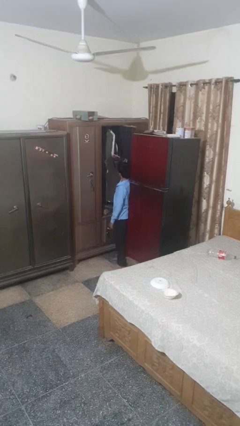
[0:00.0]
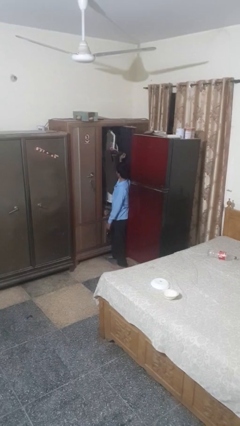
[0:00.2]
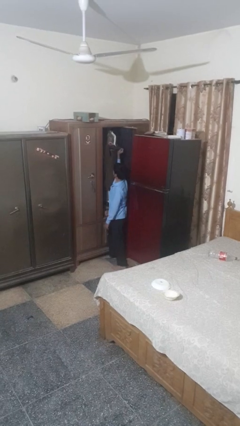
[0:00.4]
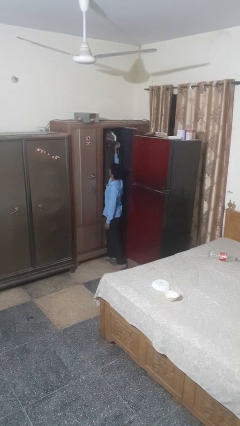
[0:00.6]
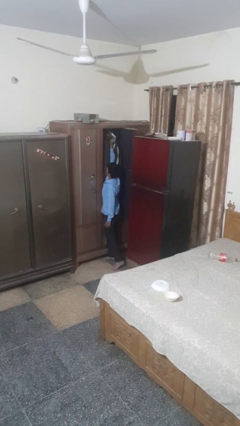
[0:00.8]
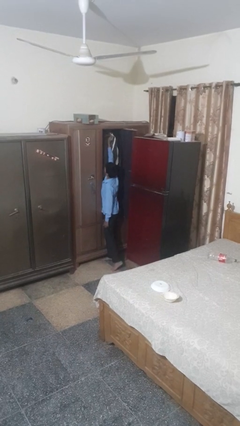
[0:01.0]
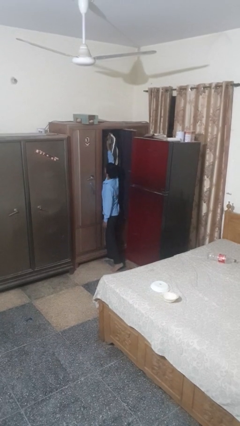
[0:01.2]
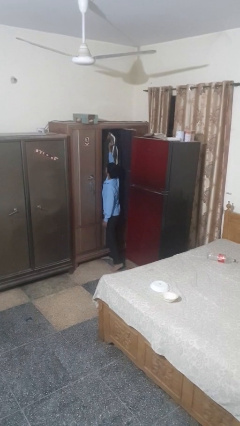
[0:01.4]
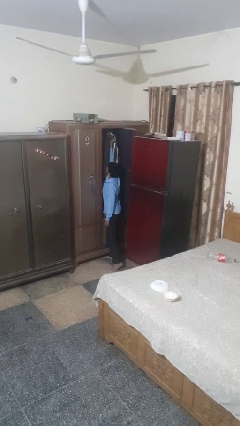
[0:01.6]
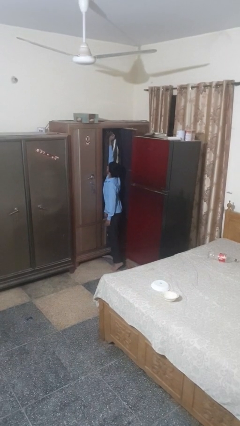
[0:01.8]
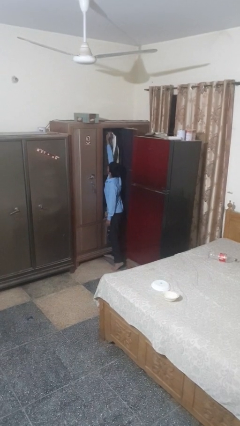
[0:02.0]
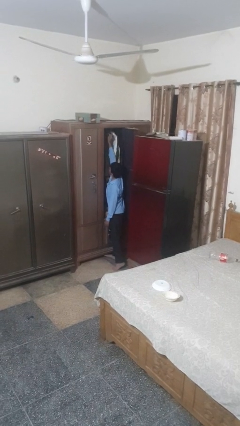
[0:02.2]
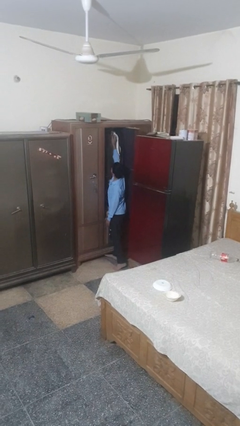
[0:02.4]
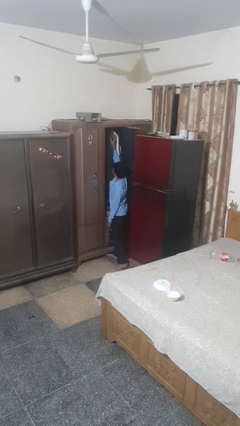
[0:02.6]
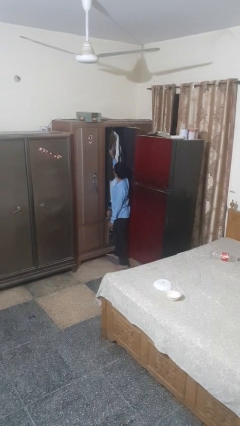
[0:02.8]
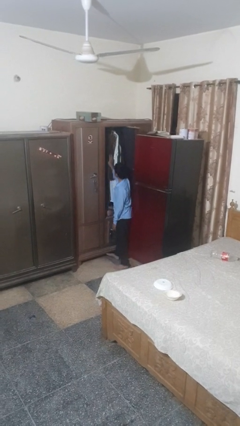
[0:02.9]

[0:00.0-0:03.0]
person puts clothes into closet

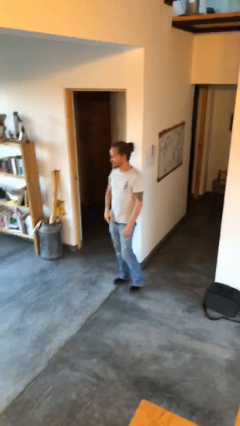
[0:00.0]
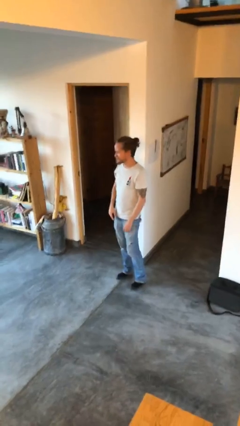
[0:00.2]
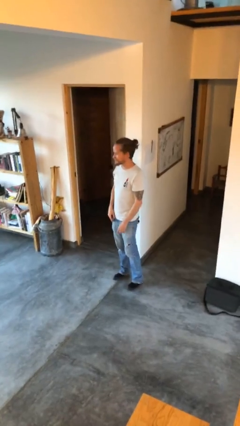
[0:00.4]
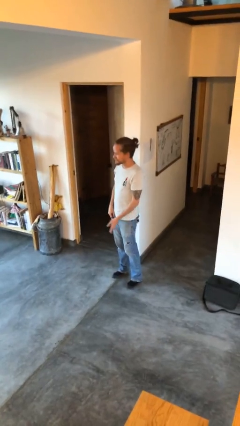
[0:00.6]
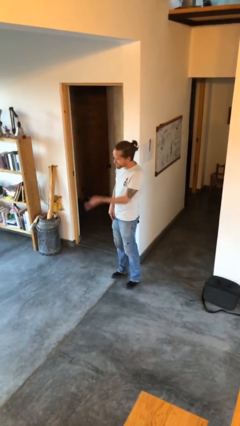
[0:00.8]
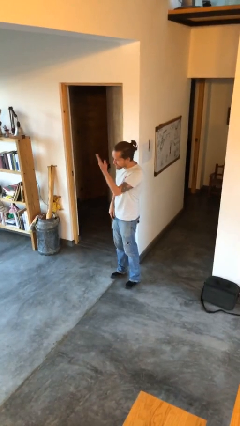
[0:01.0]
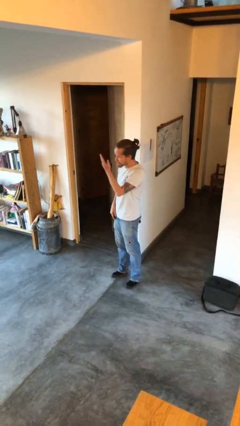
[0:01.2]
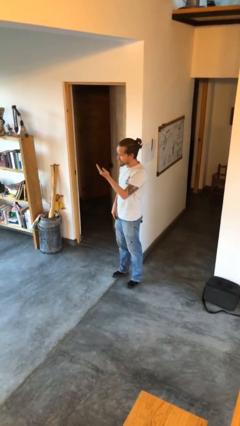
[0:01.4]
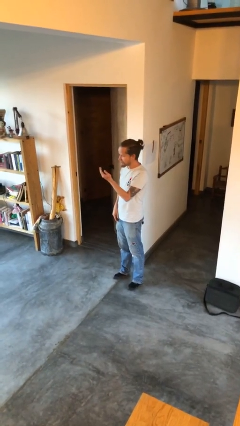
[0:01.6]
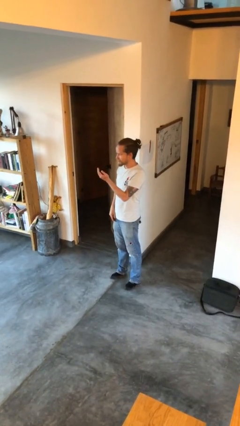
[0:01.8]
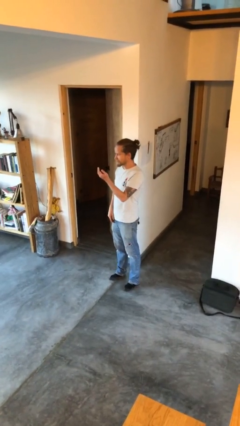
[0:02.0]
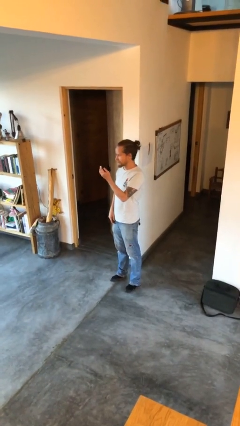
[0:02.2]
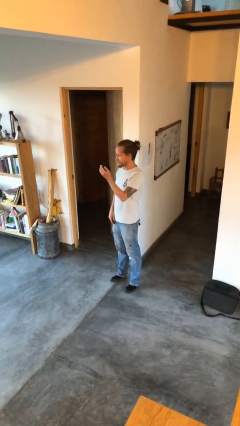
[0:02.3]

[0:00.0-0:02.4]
person gestures swipe up

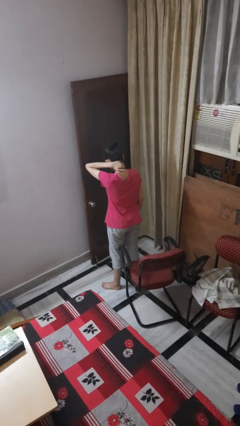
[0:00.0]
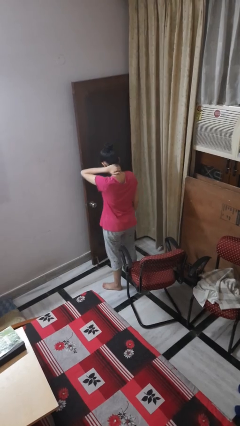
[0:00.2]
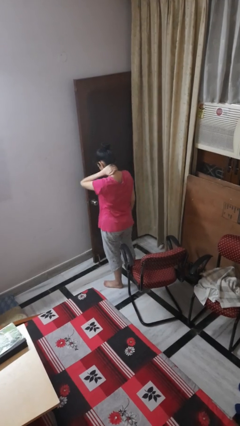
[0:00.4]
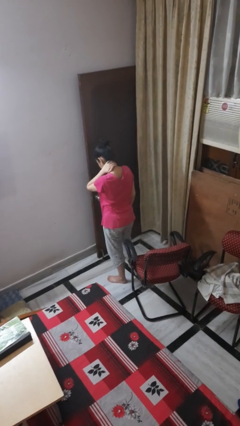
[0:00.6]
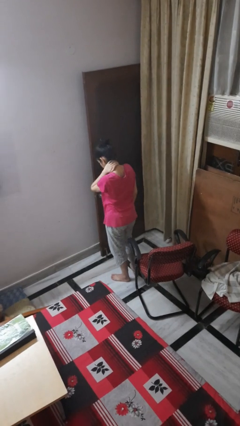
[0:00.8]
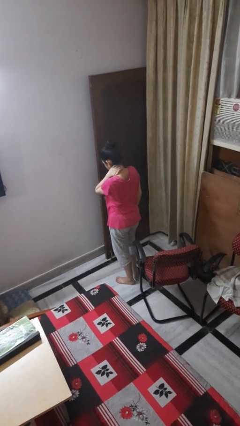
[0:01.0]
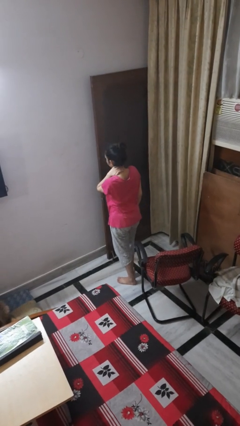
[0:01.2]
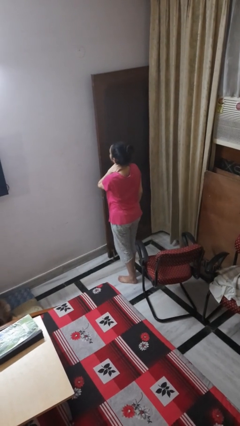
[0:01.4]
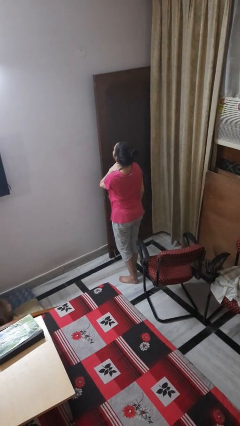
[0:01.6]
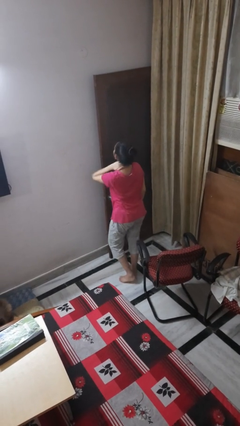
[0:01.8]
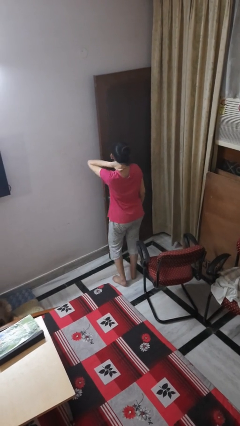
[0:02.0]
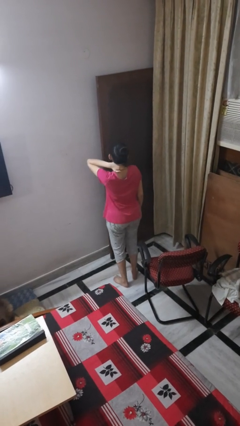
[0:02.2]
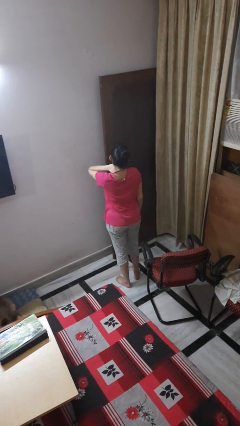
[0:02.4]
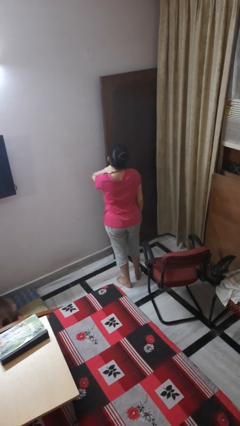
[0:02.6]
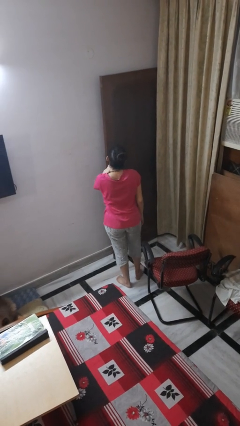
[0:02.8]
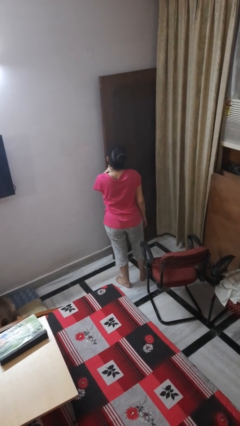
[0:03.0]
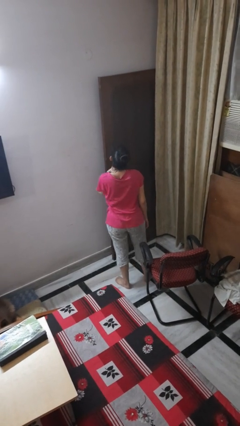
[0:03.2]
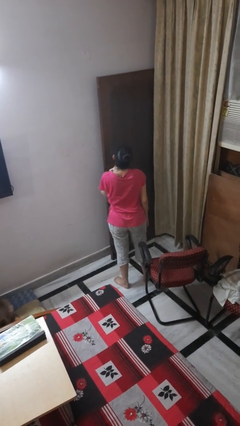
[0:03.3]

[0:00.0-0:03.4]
person rubs neck

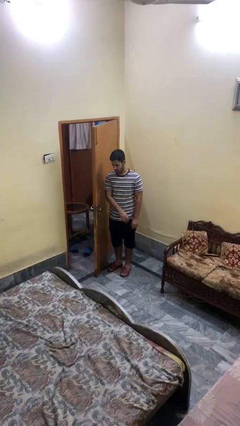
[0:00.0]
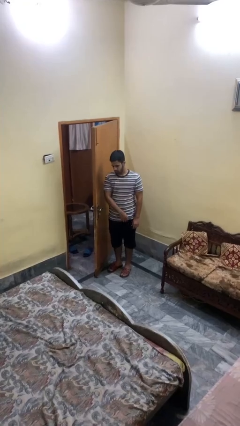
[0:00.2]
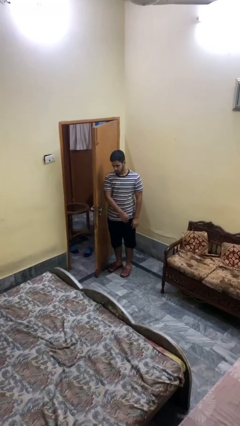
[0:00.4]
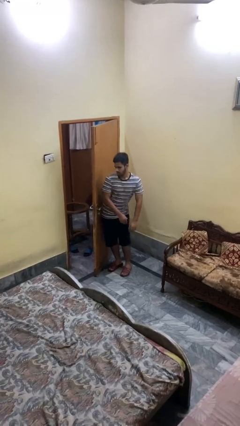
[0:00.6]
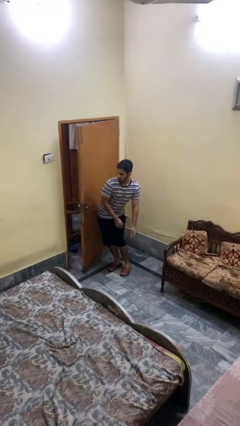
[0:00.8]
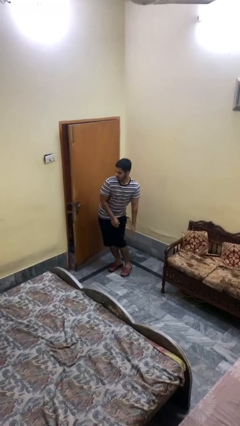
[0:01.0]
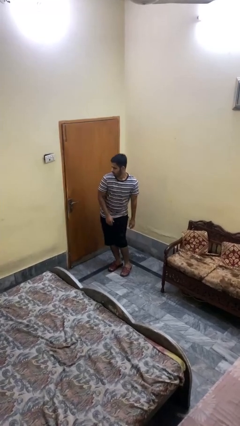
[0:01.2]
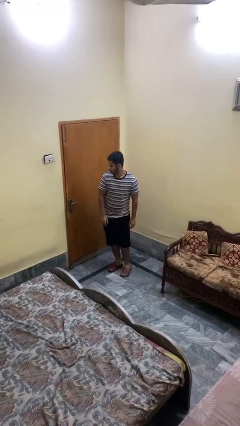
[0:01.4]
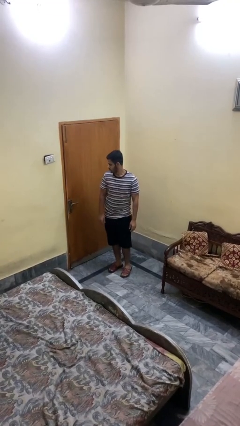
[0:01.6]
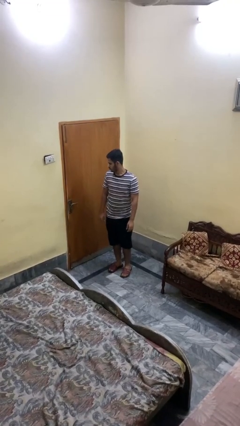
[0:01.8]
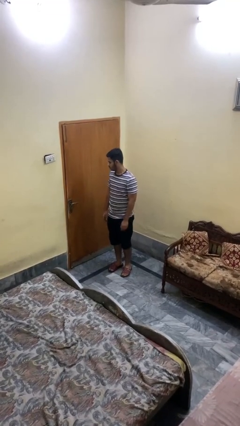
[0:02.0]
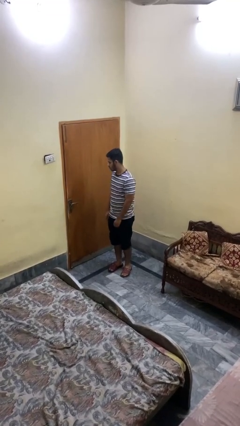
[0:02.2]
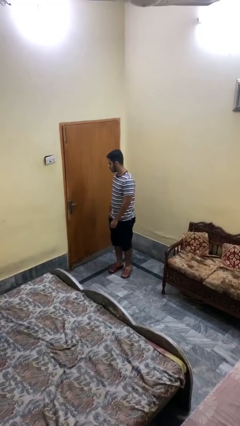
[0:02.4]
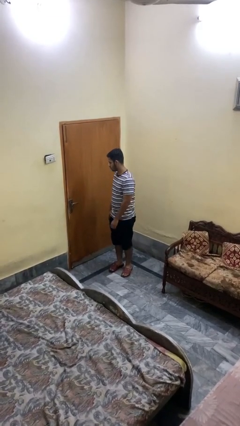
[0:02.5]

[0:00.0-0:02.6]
person closes door with hip

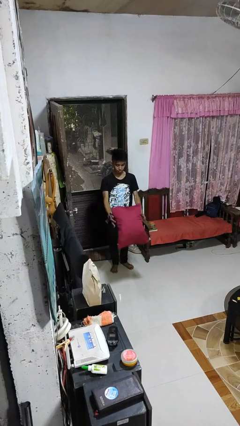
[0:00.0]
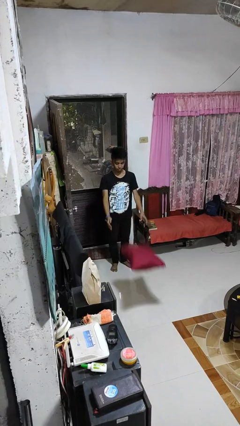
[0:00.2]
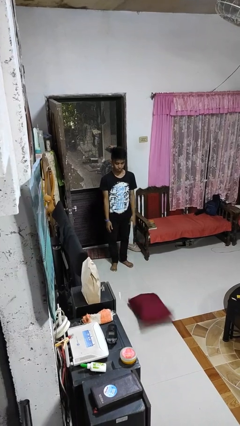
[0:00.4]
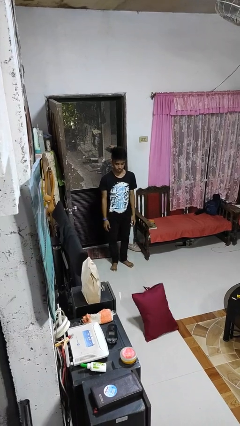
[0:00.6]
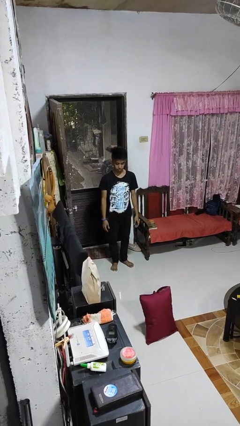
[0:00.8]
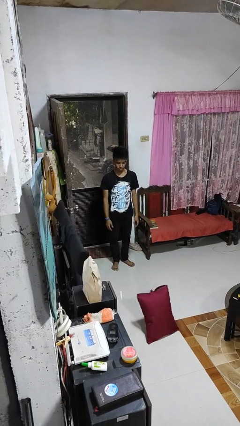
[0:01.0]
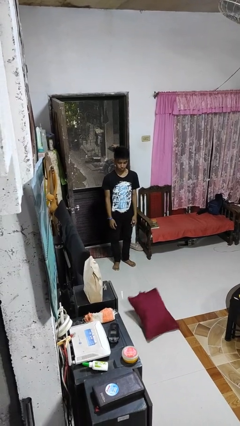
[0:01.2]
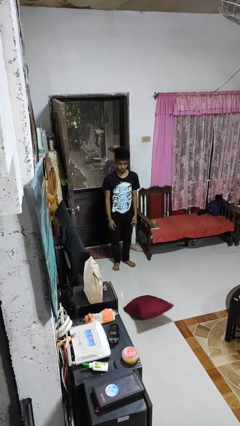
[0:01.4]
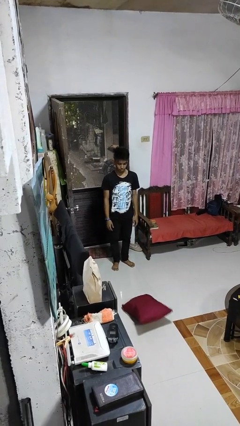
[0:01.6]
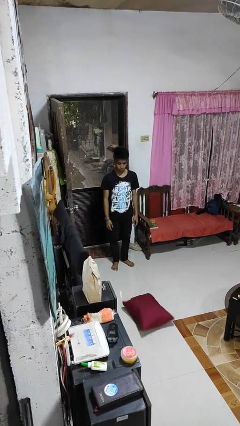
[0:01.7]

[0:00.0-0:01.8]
person throws object to ground

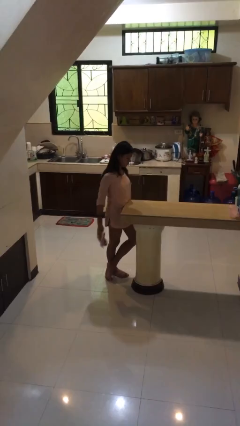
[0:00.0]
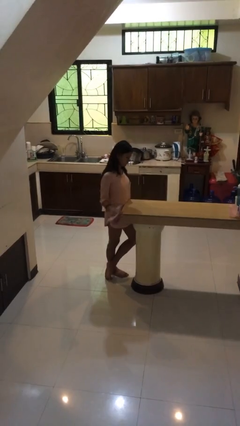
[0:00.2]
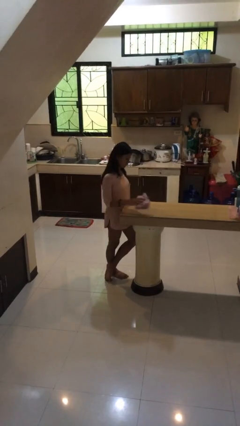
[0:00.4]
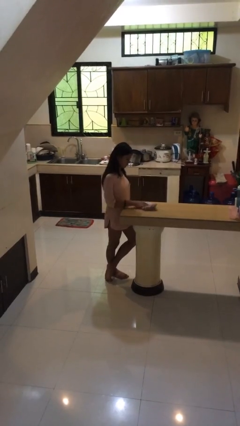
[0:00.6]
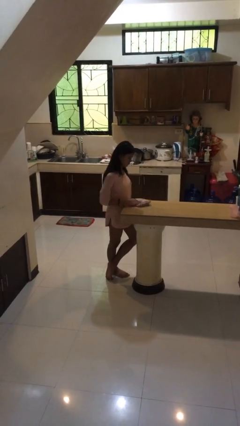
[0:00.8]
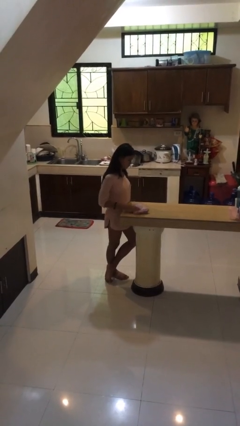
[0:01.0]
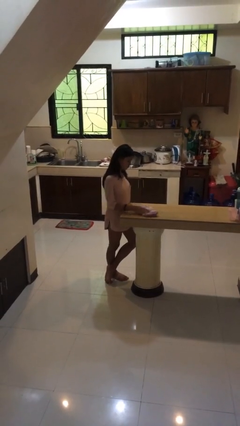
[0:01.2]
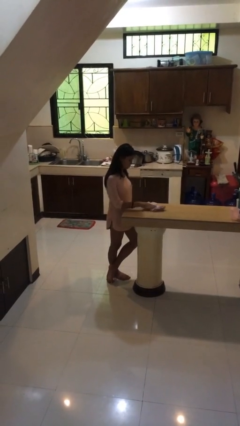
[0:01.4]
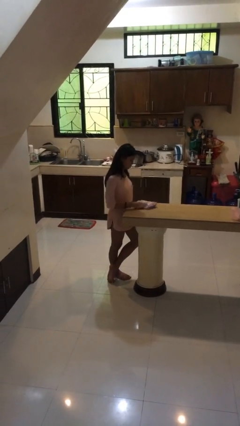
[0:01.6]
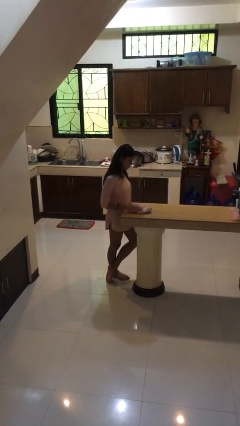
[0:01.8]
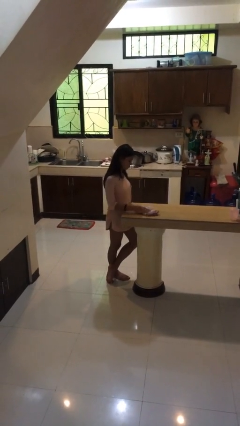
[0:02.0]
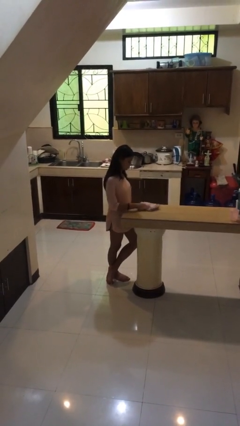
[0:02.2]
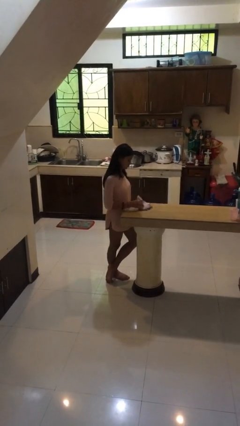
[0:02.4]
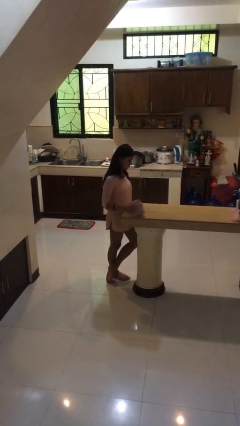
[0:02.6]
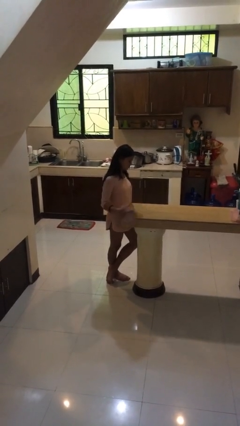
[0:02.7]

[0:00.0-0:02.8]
person cleans table with rag

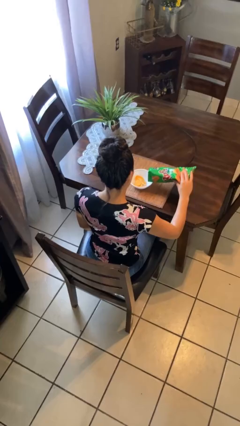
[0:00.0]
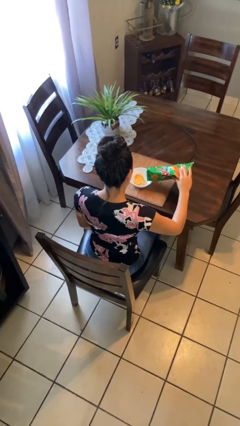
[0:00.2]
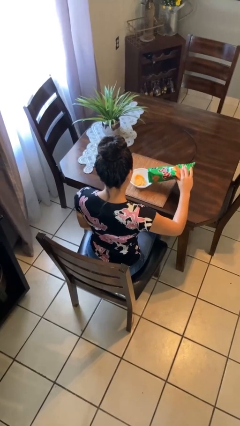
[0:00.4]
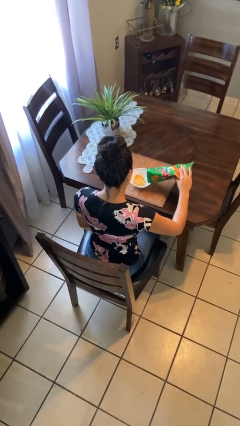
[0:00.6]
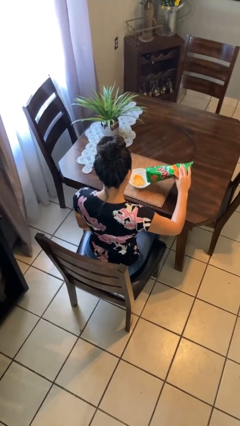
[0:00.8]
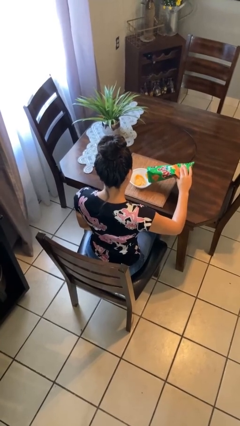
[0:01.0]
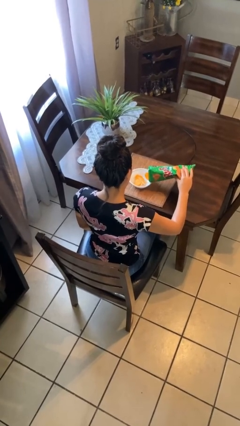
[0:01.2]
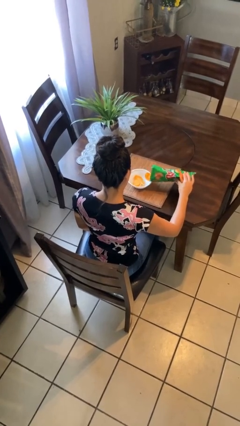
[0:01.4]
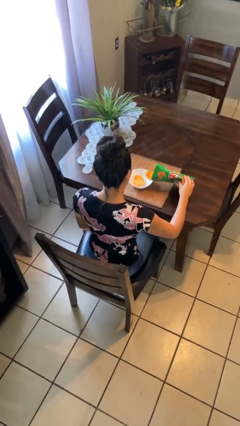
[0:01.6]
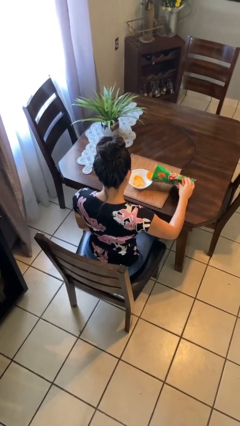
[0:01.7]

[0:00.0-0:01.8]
person pours into bowl
